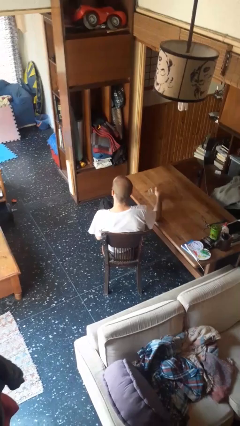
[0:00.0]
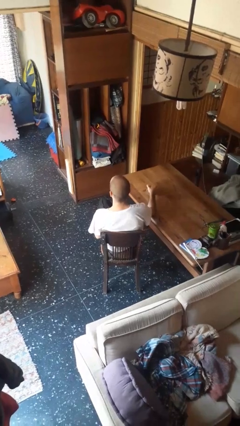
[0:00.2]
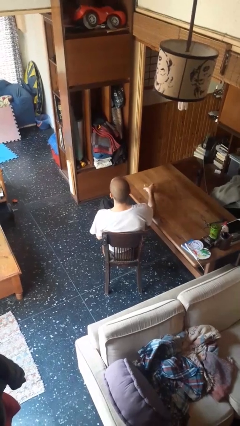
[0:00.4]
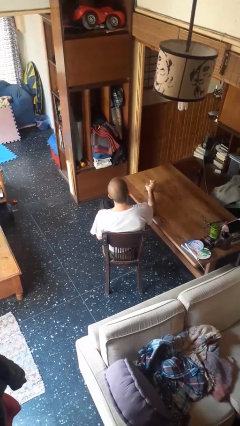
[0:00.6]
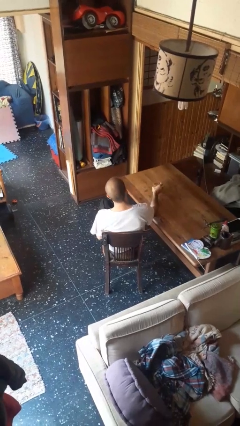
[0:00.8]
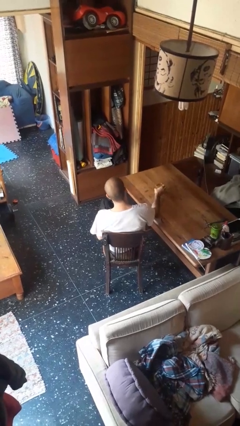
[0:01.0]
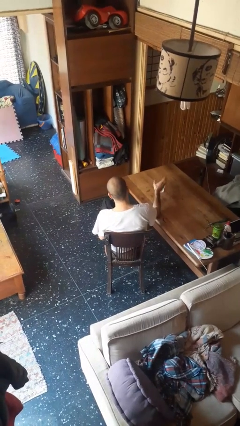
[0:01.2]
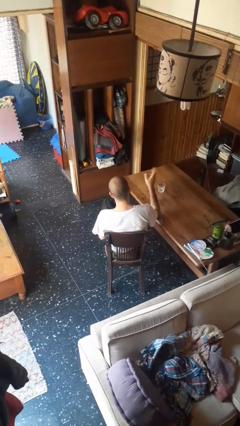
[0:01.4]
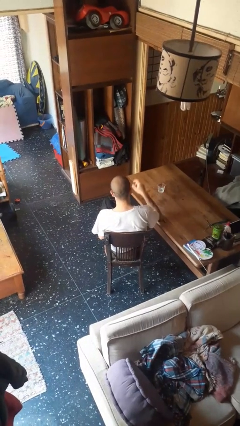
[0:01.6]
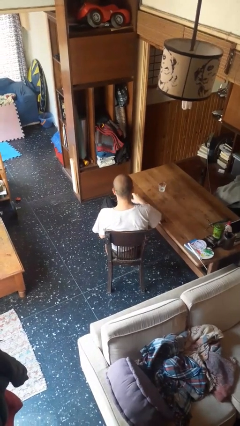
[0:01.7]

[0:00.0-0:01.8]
person sets upright glass

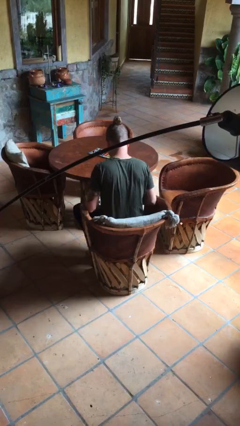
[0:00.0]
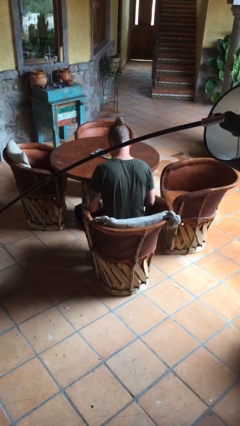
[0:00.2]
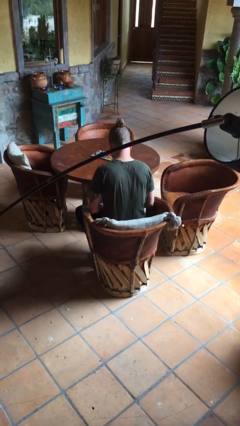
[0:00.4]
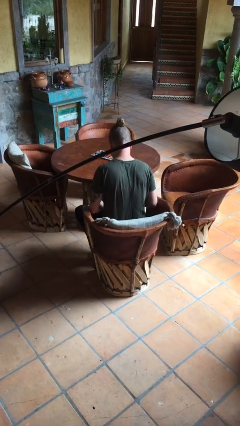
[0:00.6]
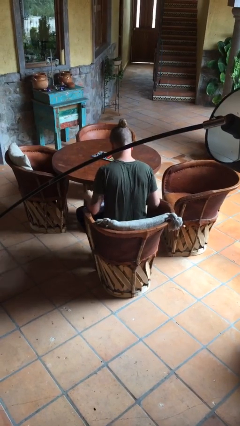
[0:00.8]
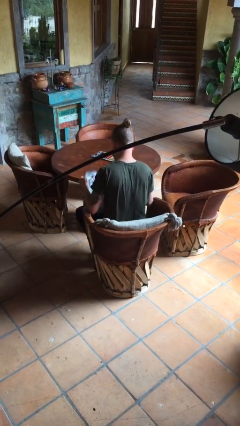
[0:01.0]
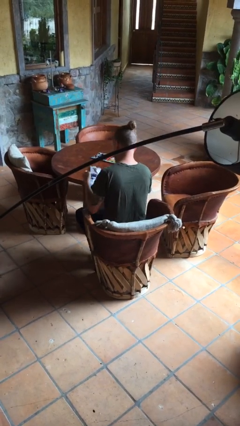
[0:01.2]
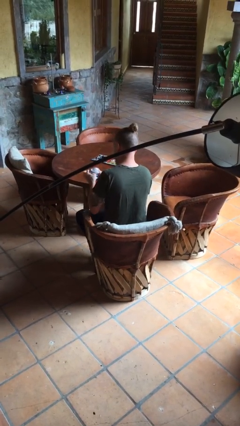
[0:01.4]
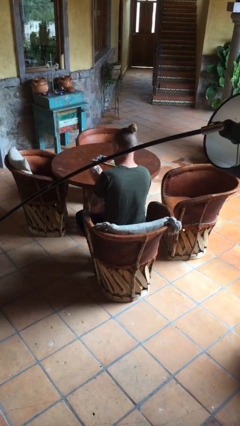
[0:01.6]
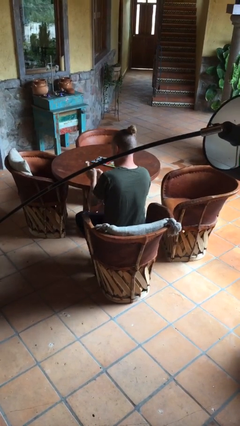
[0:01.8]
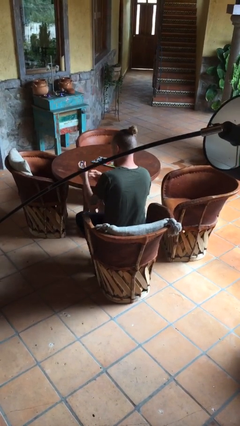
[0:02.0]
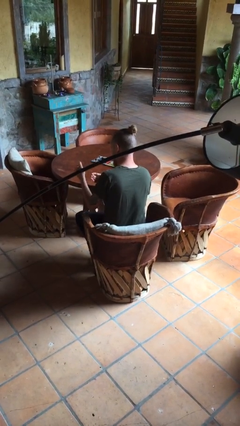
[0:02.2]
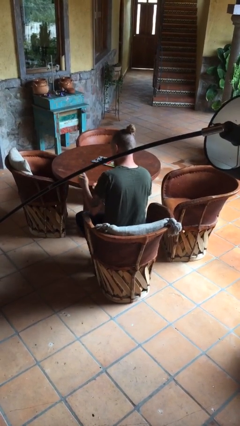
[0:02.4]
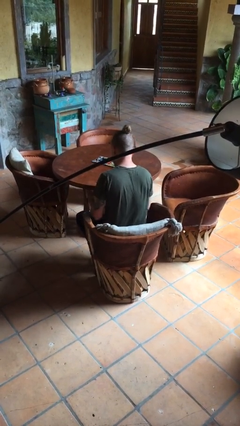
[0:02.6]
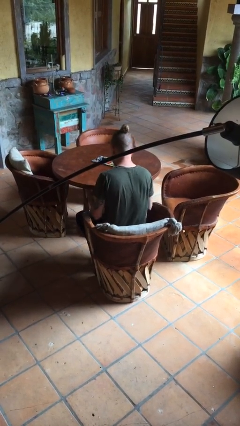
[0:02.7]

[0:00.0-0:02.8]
person crumples paper

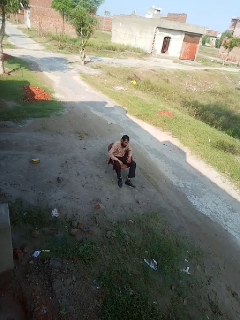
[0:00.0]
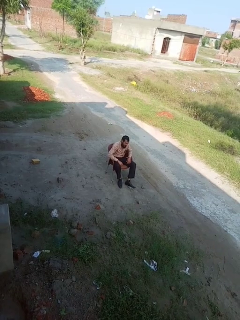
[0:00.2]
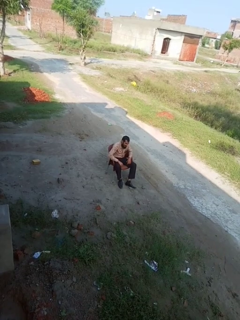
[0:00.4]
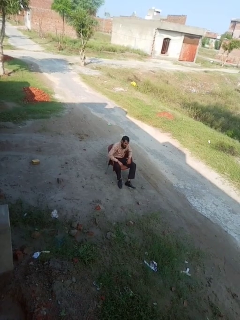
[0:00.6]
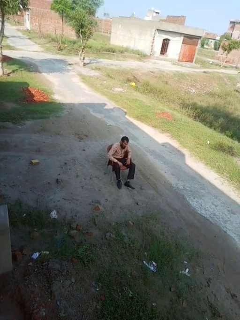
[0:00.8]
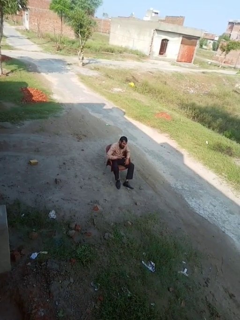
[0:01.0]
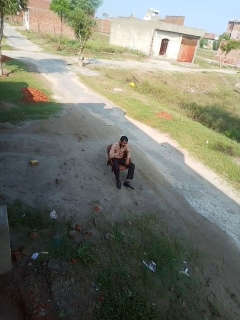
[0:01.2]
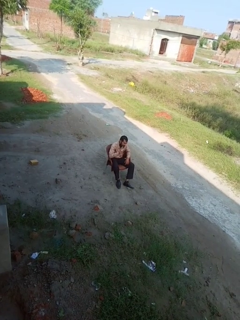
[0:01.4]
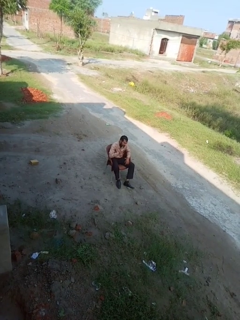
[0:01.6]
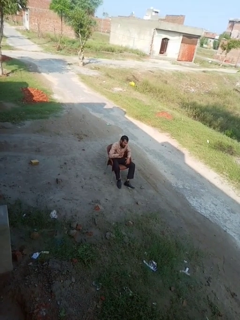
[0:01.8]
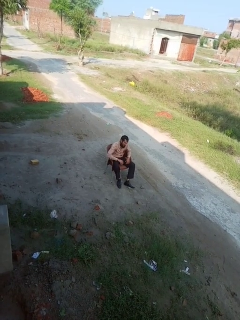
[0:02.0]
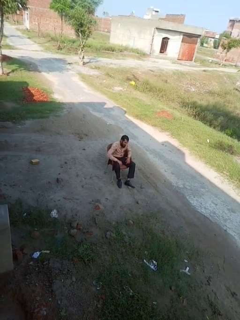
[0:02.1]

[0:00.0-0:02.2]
person gestures number four

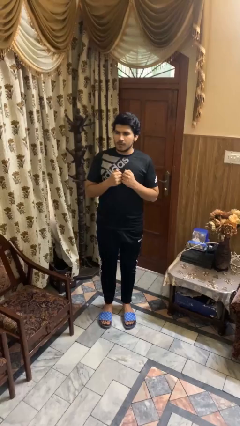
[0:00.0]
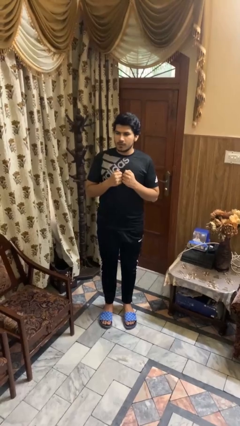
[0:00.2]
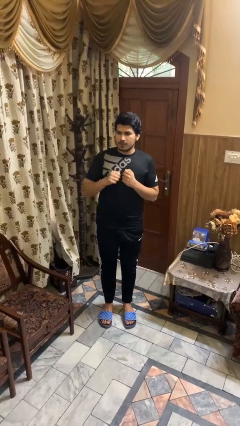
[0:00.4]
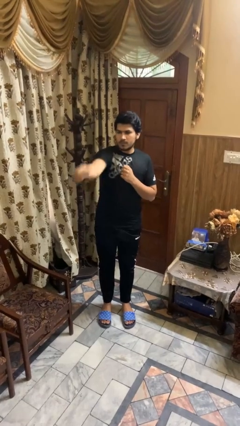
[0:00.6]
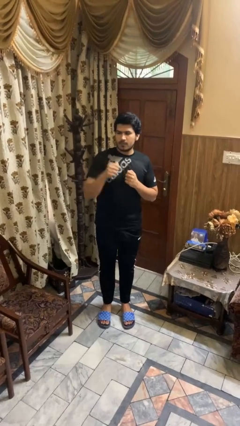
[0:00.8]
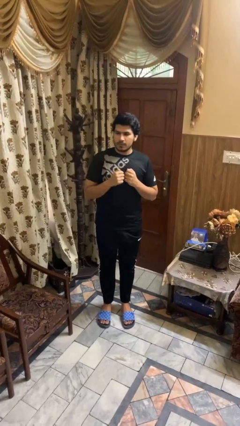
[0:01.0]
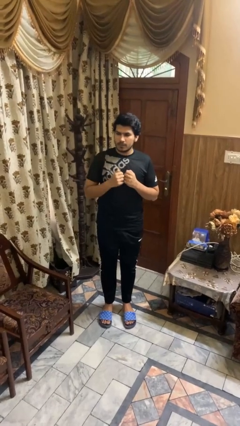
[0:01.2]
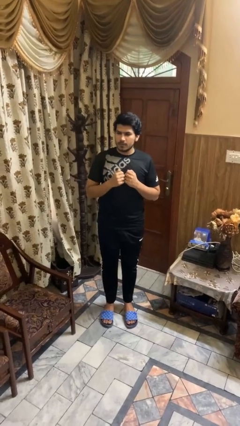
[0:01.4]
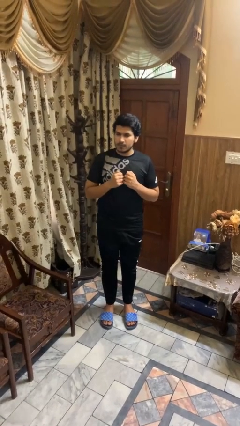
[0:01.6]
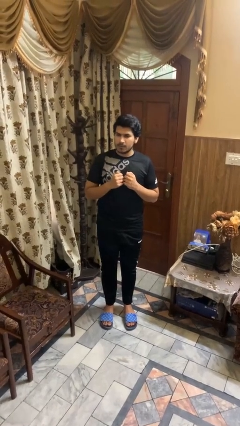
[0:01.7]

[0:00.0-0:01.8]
person karate chop

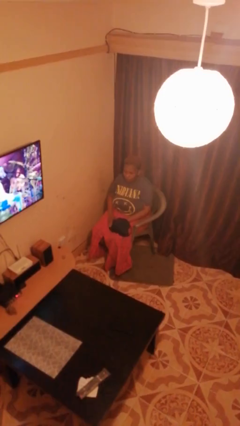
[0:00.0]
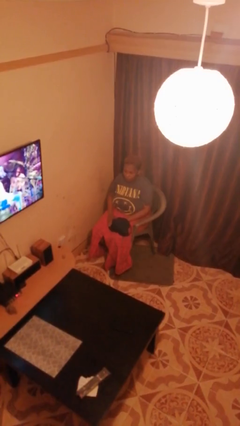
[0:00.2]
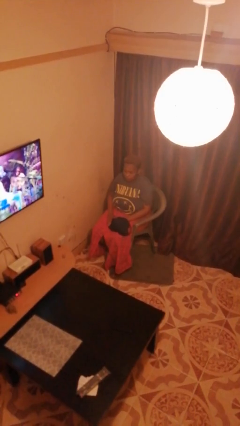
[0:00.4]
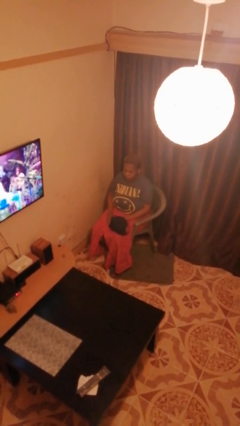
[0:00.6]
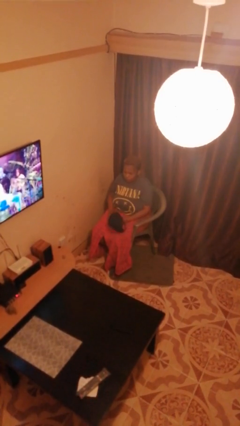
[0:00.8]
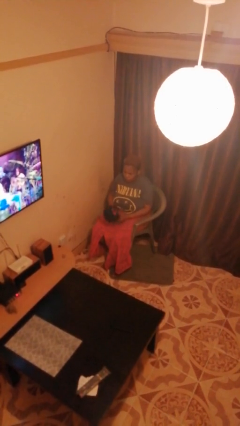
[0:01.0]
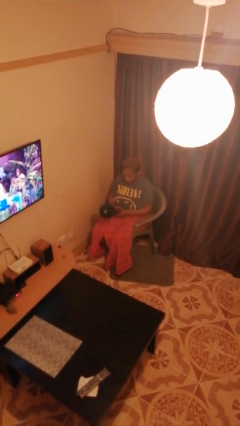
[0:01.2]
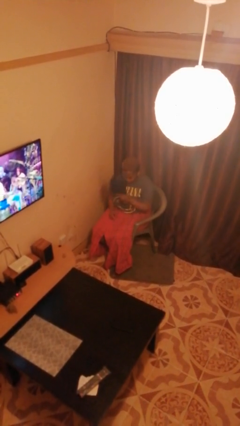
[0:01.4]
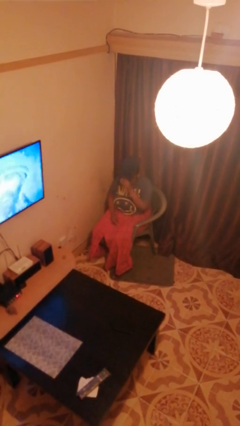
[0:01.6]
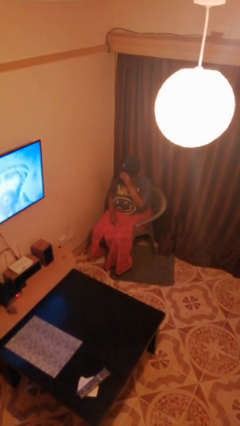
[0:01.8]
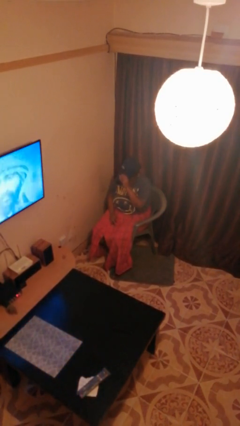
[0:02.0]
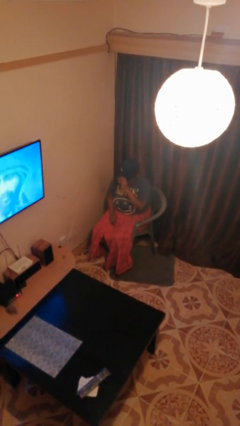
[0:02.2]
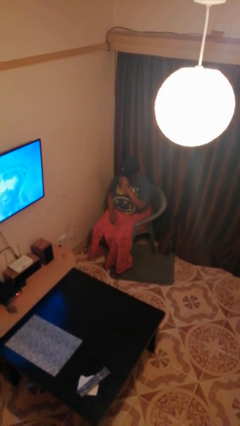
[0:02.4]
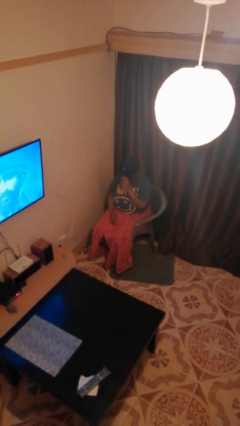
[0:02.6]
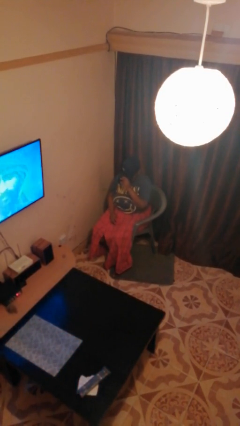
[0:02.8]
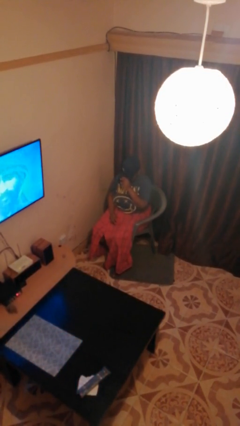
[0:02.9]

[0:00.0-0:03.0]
person puts on hat

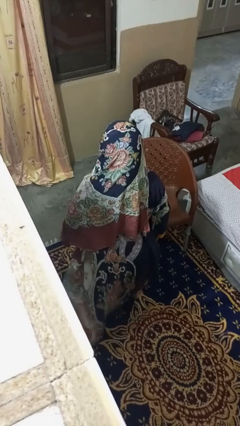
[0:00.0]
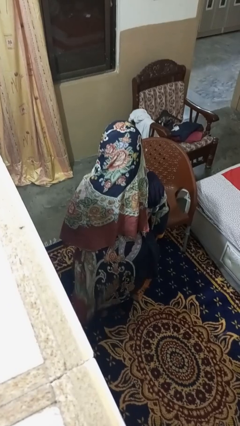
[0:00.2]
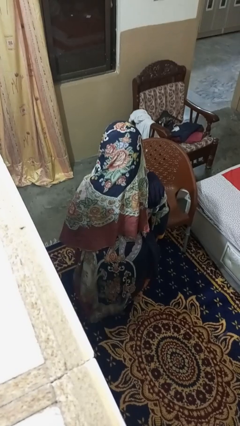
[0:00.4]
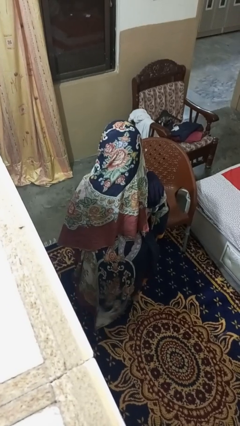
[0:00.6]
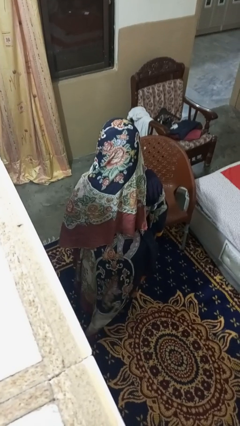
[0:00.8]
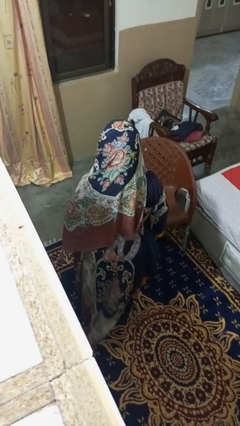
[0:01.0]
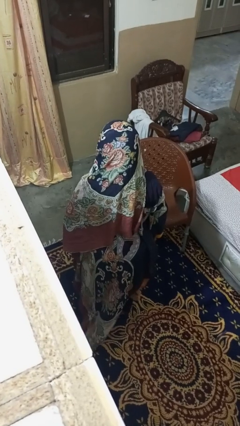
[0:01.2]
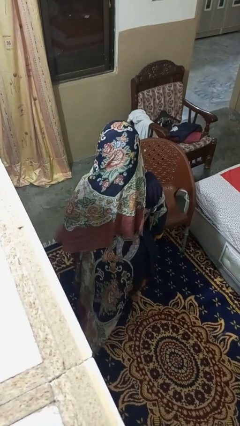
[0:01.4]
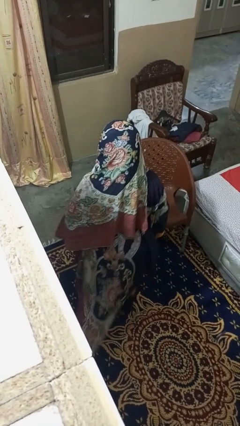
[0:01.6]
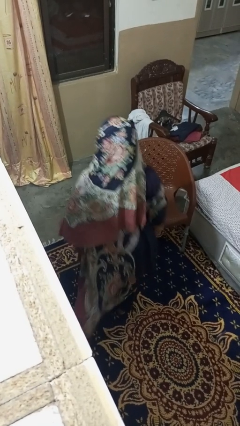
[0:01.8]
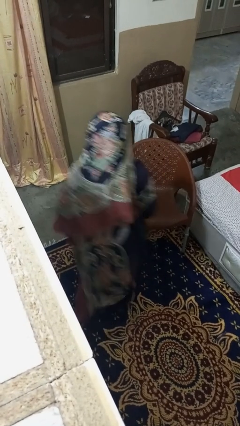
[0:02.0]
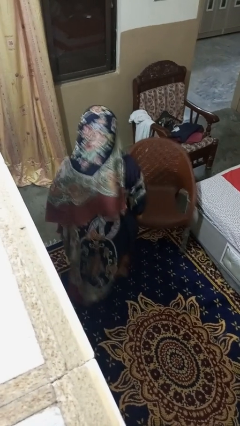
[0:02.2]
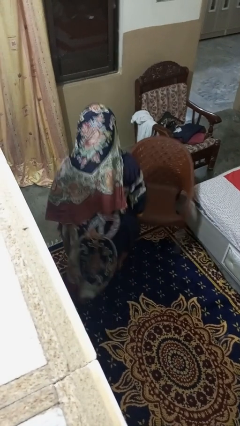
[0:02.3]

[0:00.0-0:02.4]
person trips on object on floor

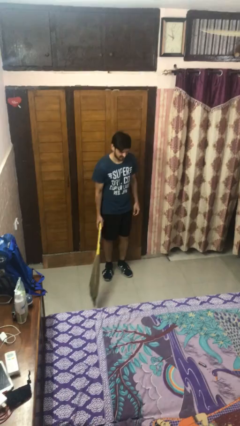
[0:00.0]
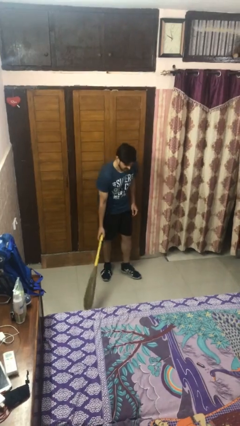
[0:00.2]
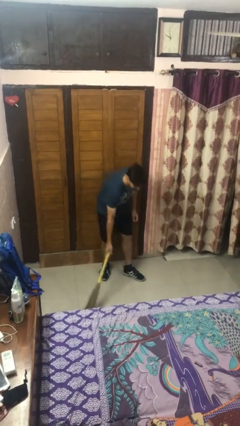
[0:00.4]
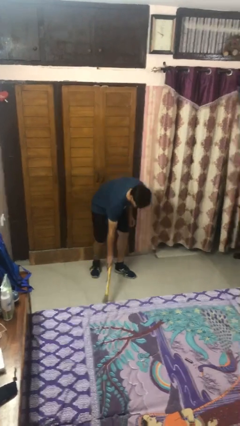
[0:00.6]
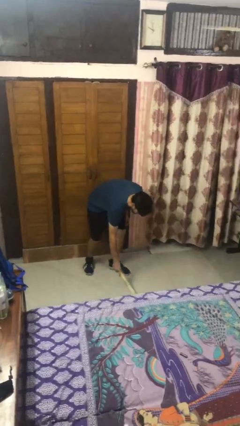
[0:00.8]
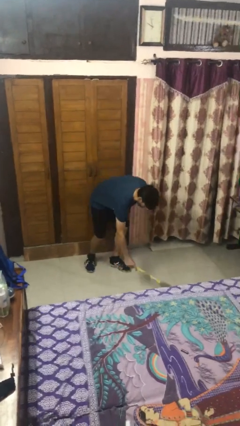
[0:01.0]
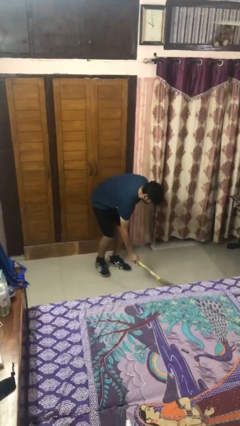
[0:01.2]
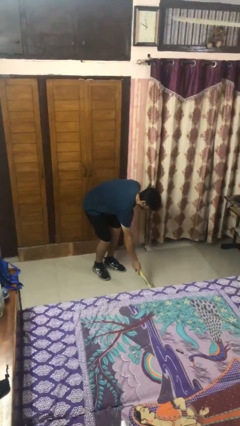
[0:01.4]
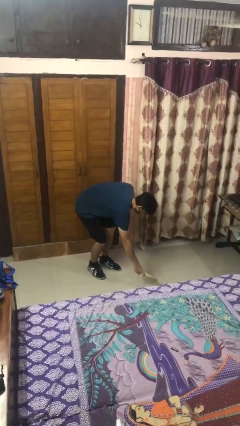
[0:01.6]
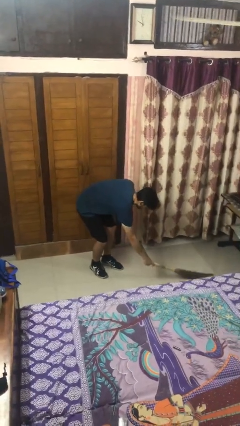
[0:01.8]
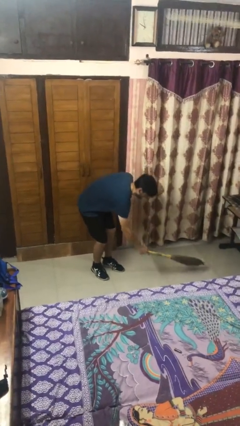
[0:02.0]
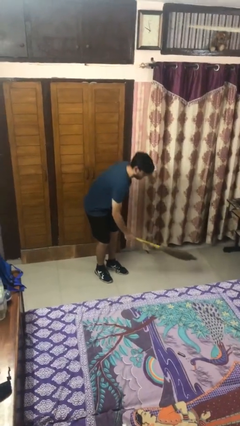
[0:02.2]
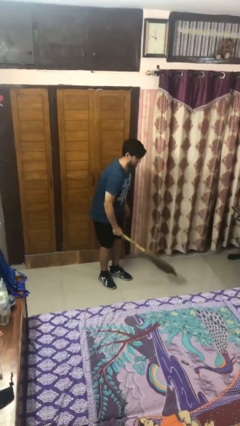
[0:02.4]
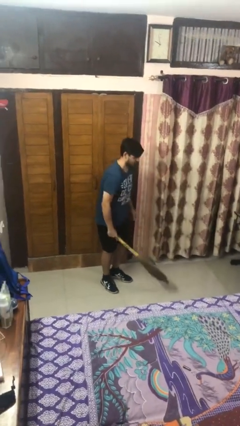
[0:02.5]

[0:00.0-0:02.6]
person sweeps floor

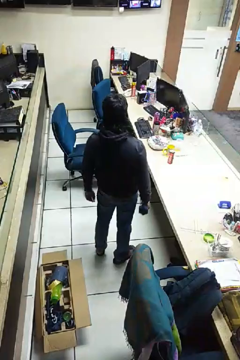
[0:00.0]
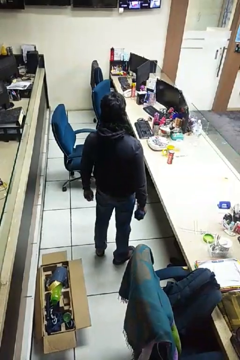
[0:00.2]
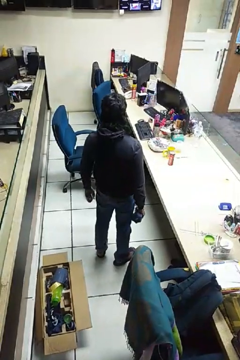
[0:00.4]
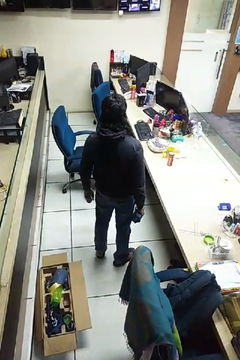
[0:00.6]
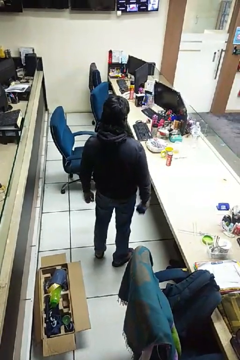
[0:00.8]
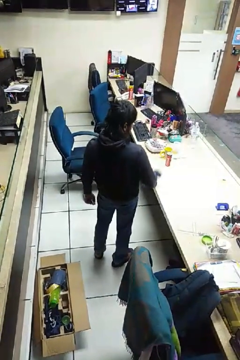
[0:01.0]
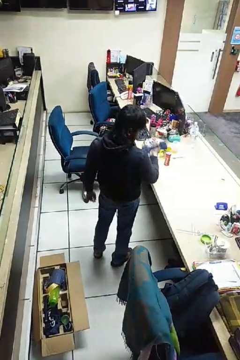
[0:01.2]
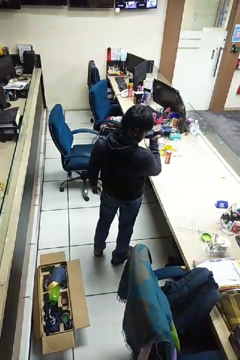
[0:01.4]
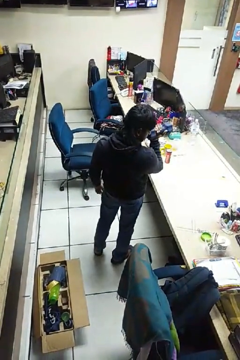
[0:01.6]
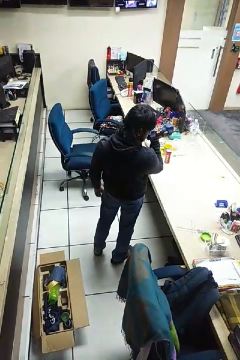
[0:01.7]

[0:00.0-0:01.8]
person lifts dumbbells
